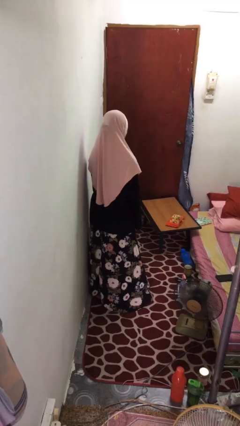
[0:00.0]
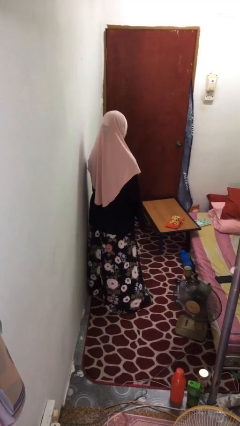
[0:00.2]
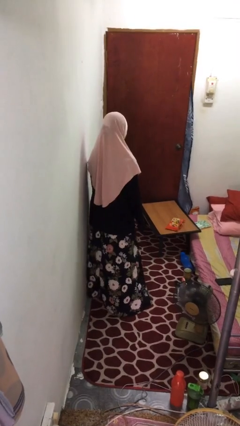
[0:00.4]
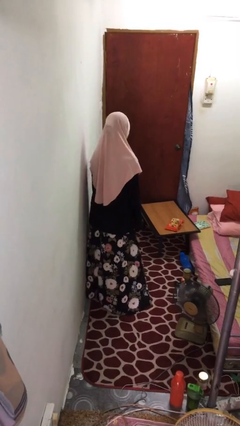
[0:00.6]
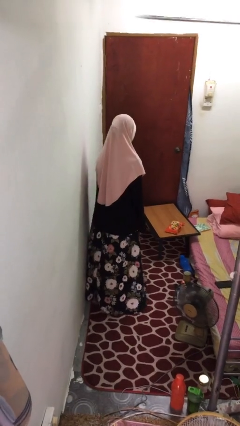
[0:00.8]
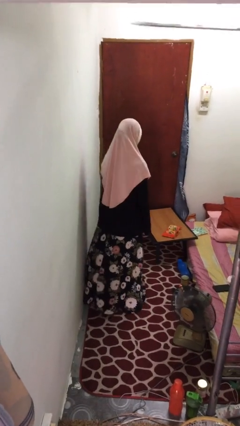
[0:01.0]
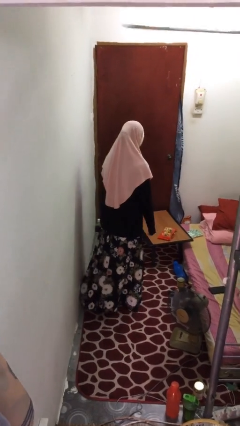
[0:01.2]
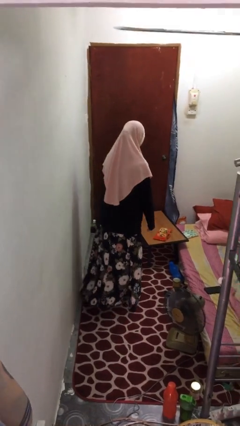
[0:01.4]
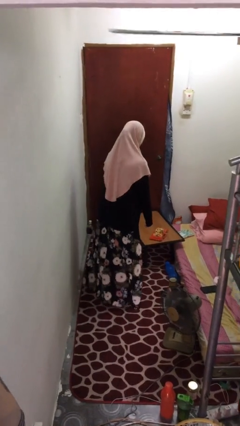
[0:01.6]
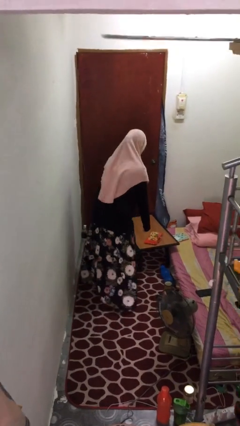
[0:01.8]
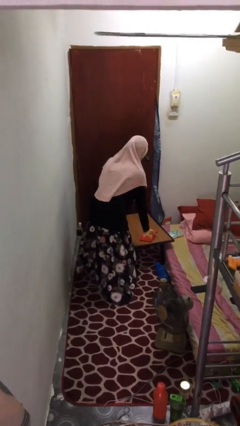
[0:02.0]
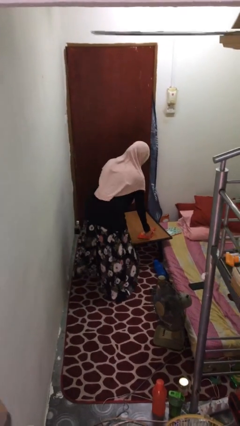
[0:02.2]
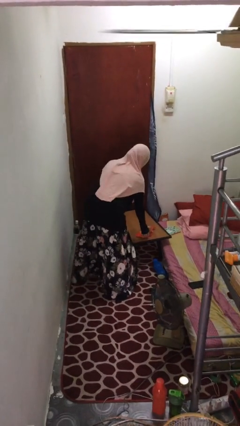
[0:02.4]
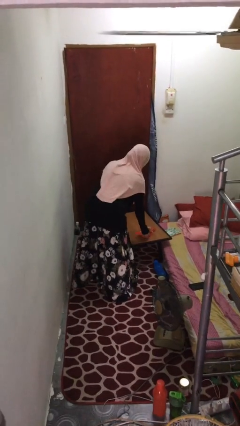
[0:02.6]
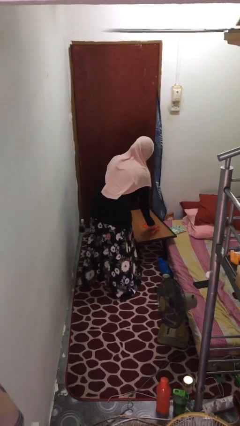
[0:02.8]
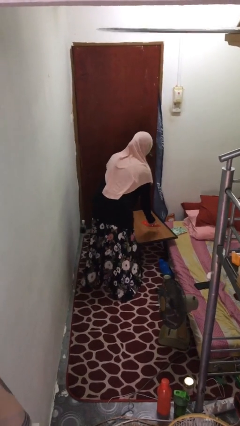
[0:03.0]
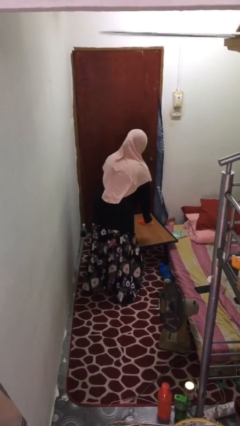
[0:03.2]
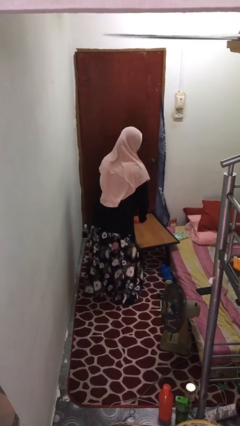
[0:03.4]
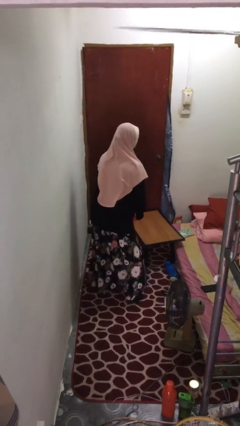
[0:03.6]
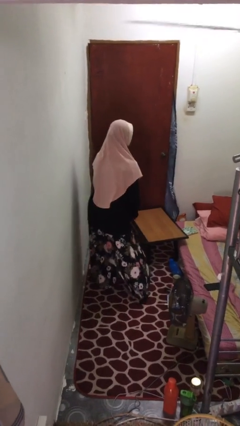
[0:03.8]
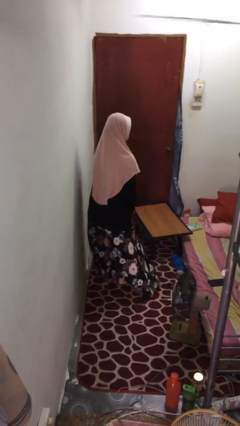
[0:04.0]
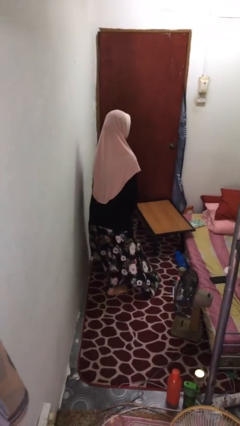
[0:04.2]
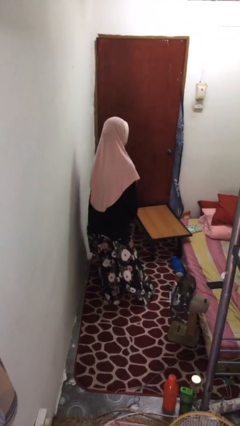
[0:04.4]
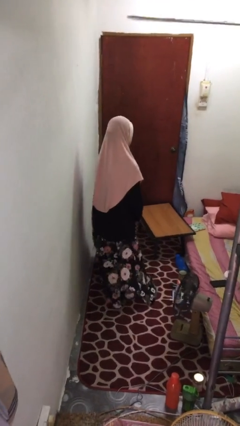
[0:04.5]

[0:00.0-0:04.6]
person picks up object from table

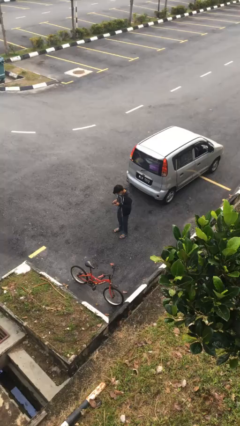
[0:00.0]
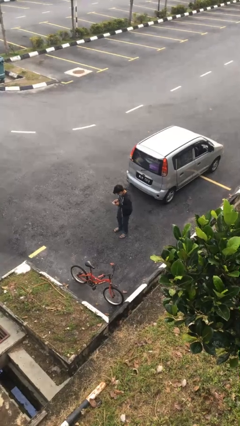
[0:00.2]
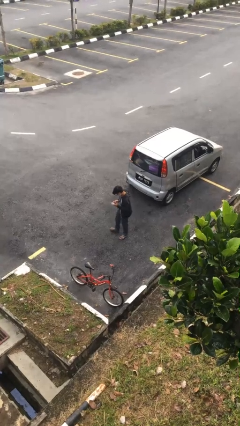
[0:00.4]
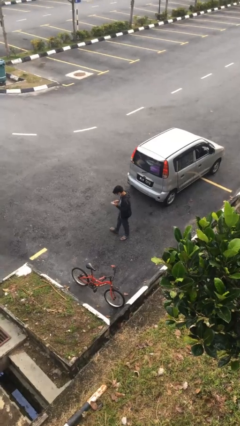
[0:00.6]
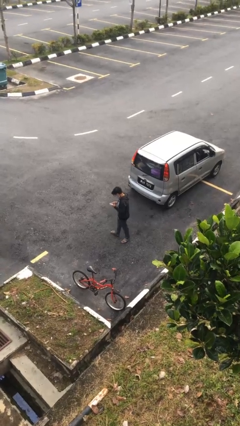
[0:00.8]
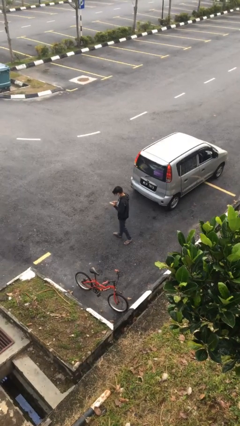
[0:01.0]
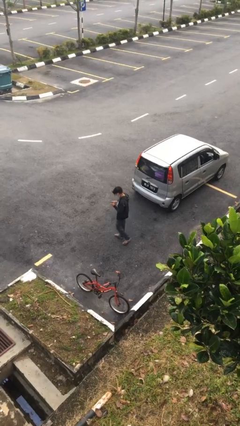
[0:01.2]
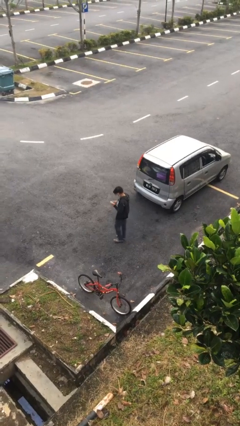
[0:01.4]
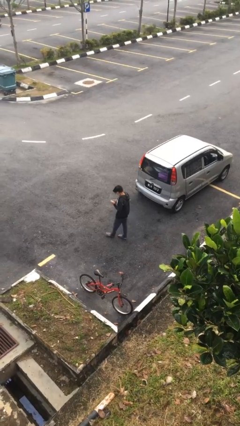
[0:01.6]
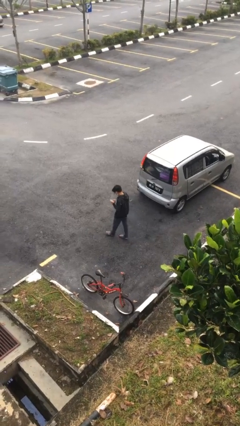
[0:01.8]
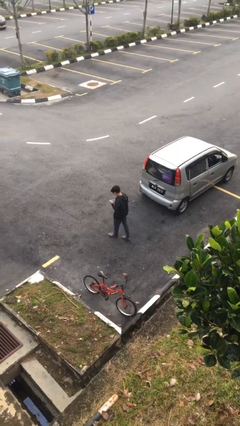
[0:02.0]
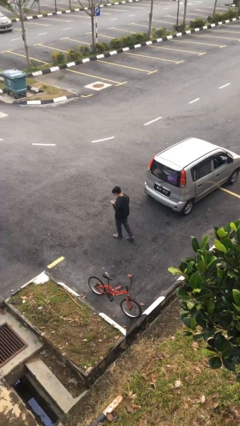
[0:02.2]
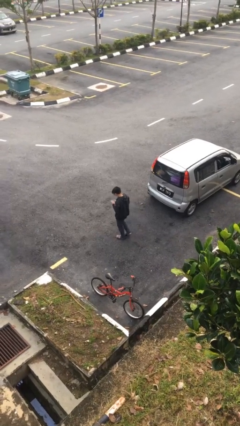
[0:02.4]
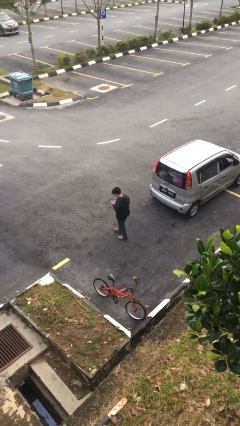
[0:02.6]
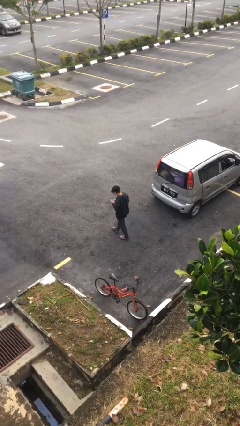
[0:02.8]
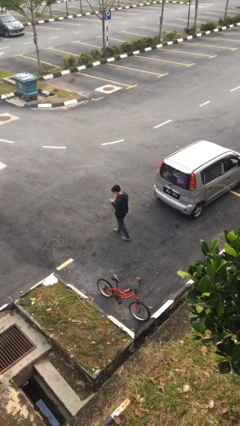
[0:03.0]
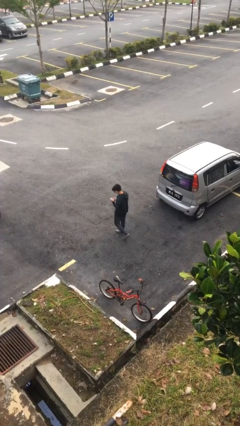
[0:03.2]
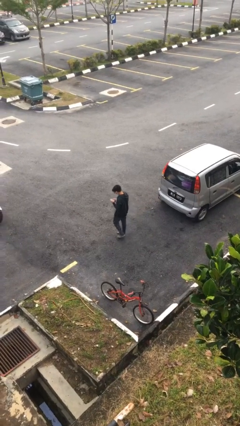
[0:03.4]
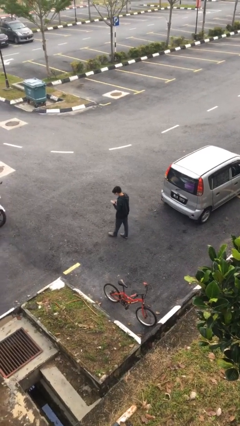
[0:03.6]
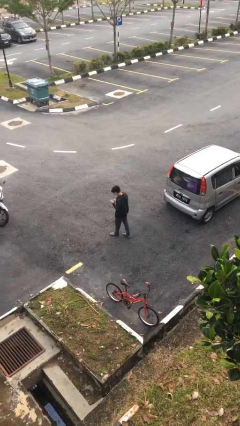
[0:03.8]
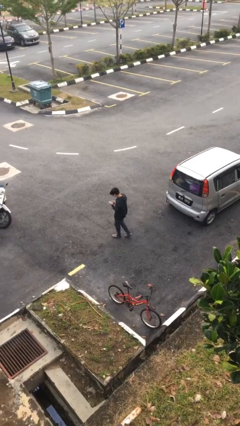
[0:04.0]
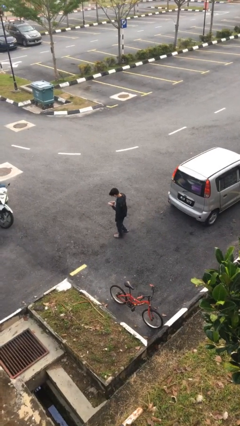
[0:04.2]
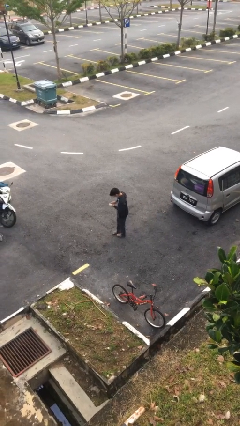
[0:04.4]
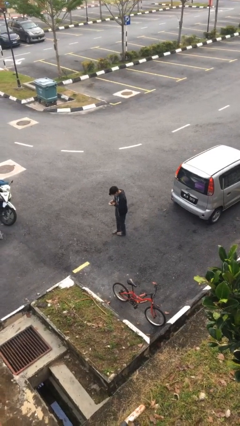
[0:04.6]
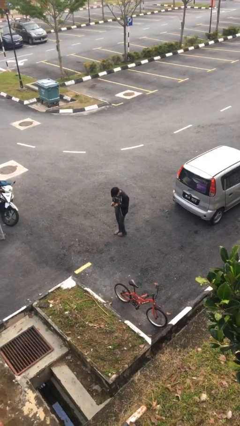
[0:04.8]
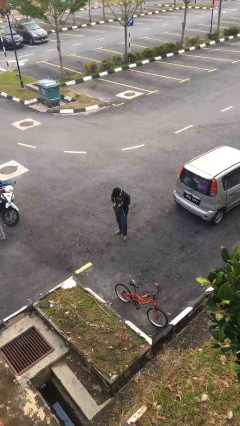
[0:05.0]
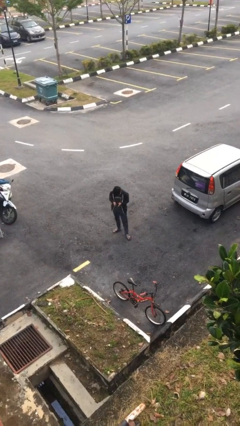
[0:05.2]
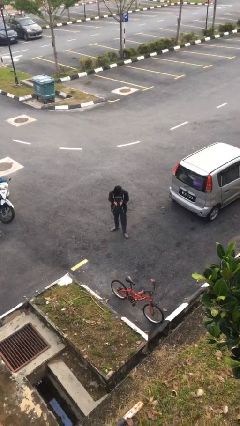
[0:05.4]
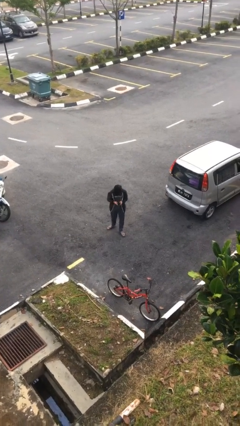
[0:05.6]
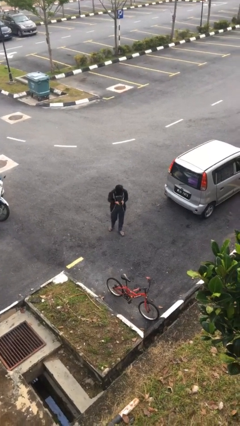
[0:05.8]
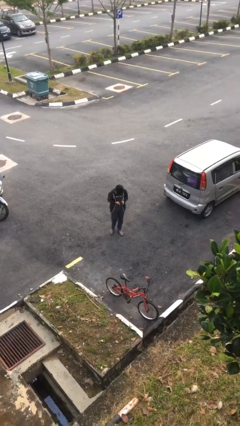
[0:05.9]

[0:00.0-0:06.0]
person texts on phone

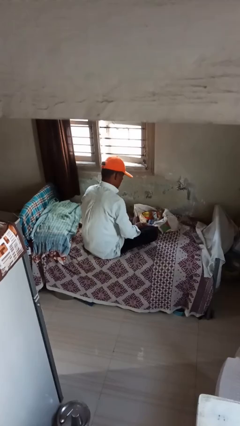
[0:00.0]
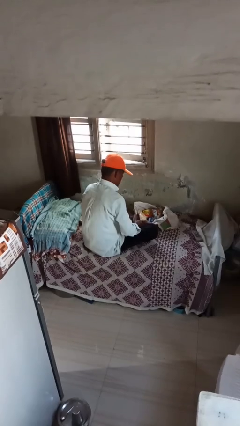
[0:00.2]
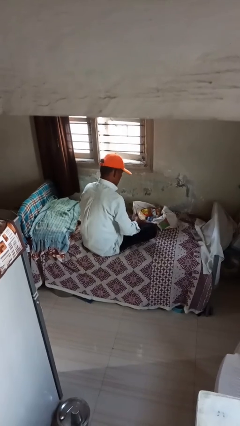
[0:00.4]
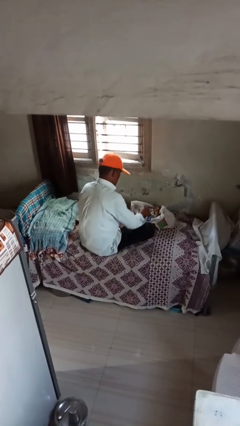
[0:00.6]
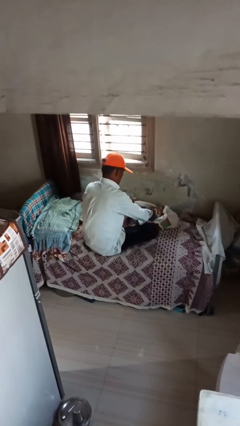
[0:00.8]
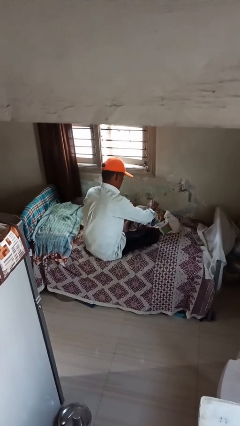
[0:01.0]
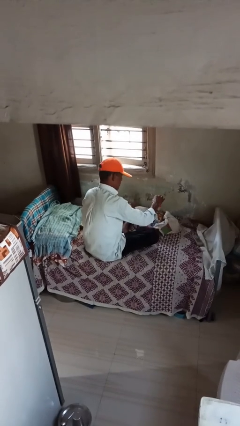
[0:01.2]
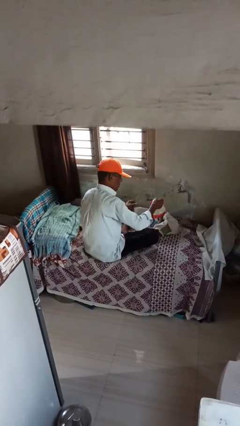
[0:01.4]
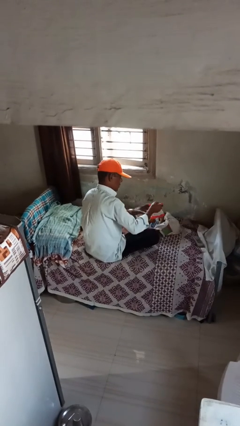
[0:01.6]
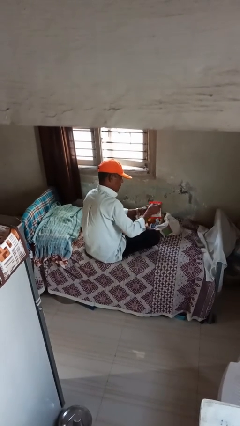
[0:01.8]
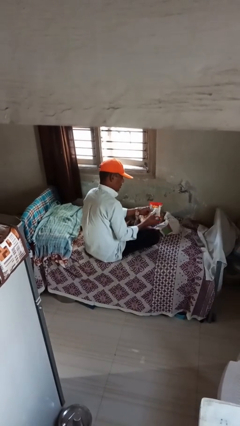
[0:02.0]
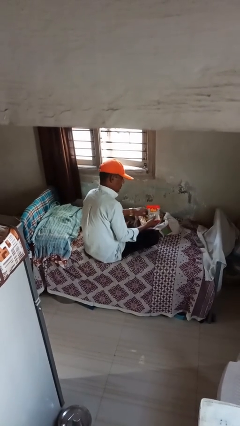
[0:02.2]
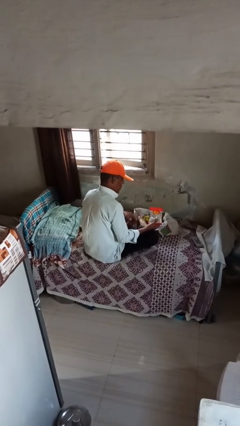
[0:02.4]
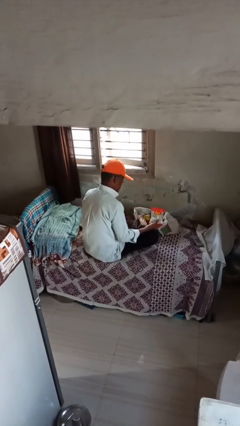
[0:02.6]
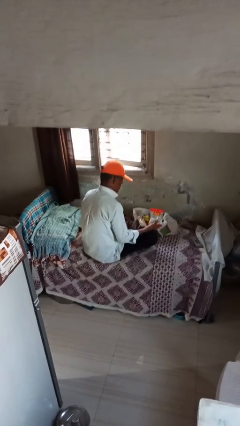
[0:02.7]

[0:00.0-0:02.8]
person takes object from bag

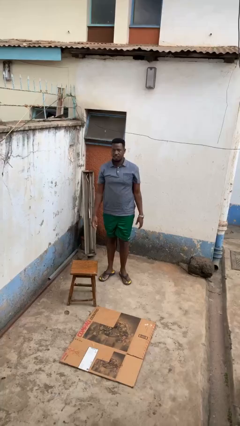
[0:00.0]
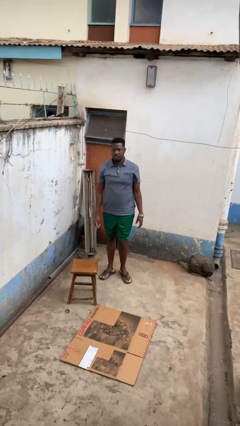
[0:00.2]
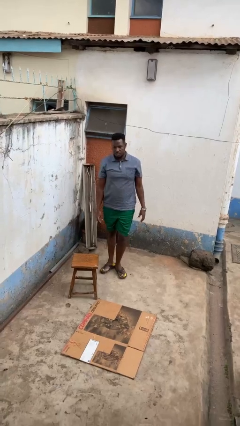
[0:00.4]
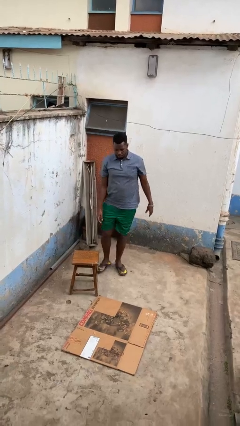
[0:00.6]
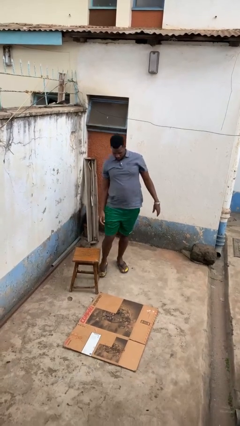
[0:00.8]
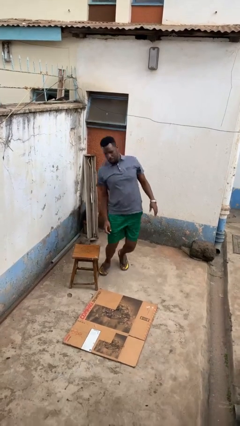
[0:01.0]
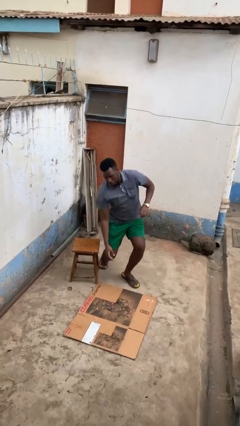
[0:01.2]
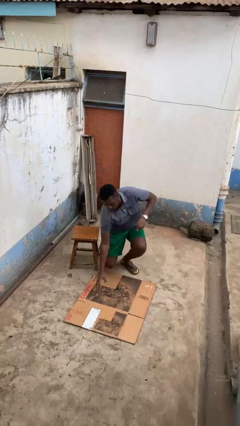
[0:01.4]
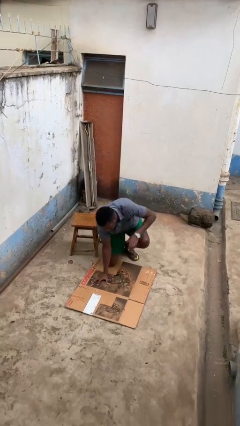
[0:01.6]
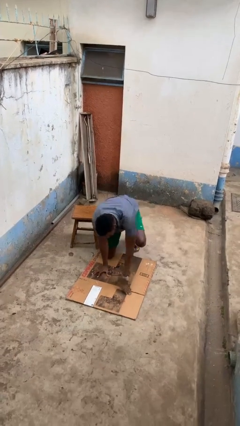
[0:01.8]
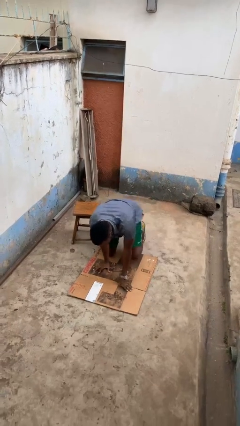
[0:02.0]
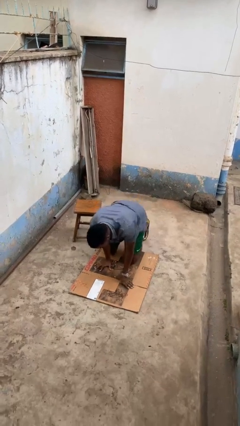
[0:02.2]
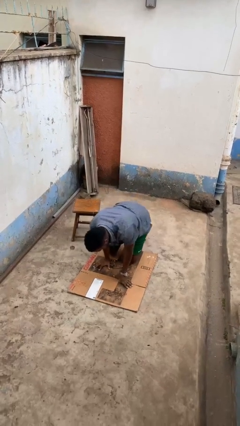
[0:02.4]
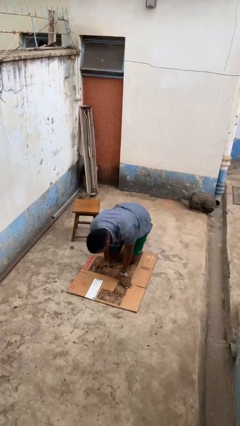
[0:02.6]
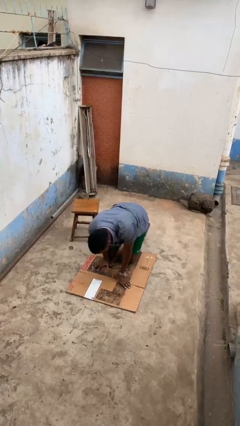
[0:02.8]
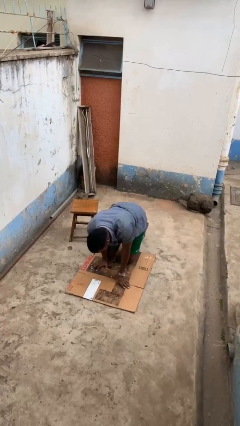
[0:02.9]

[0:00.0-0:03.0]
person trips on object on floor

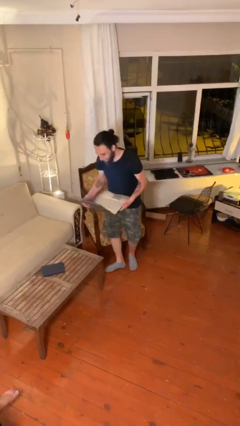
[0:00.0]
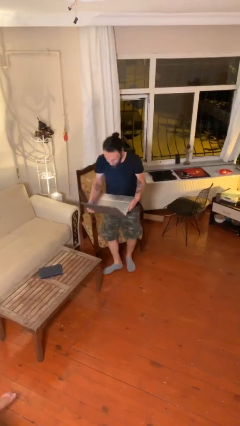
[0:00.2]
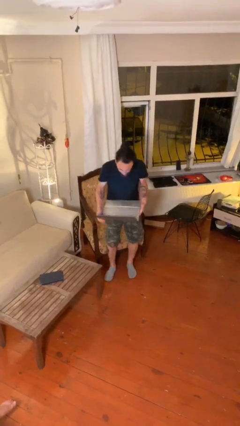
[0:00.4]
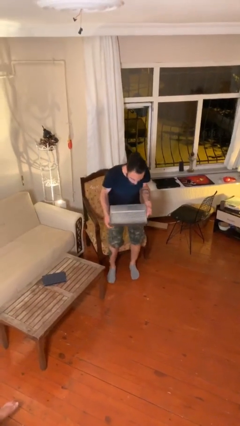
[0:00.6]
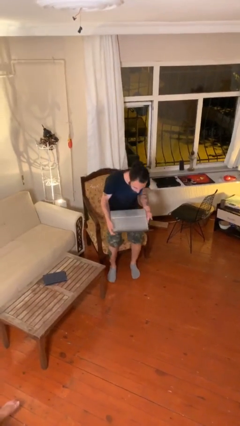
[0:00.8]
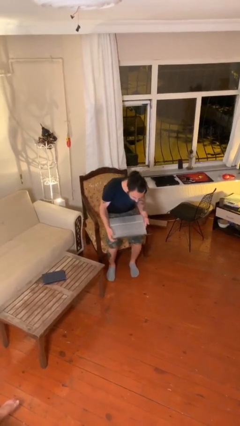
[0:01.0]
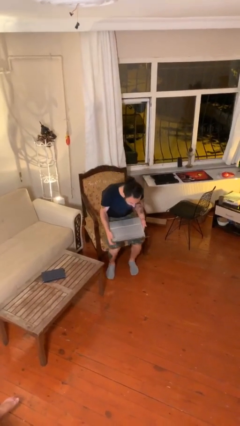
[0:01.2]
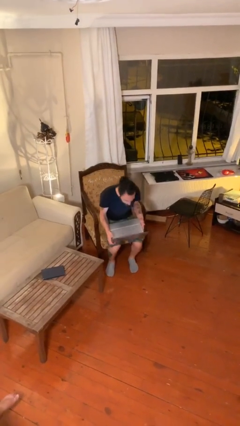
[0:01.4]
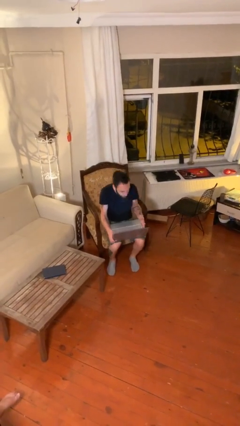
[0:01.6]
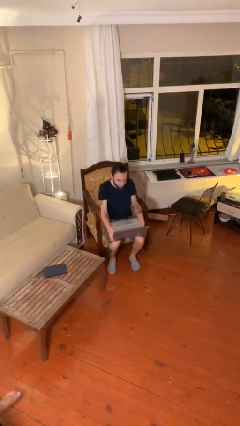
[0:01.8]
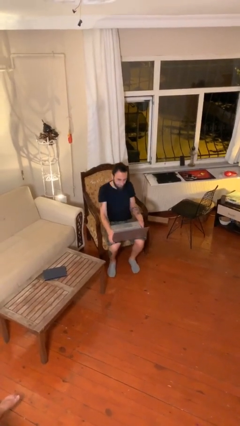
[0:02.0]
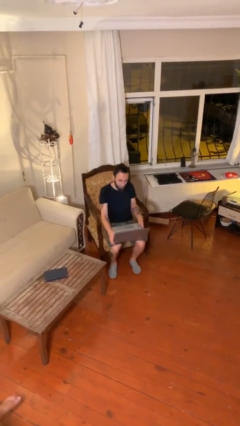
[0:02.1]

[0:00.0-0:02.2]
person sits down
